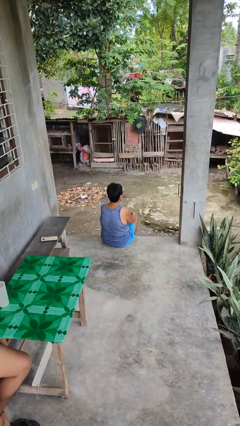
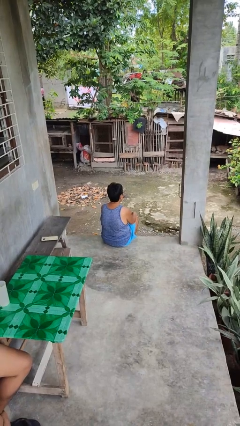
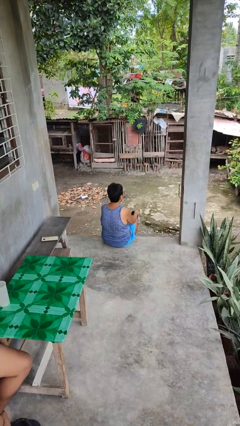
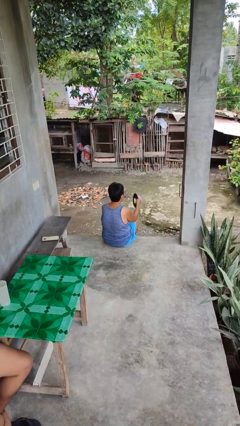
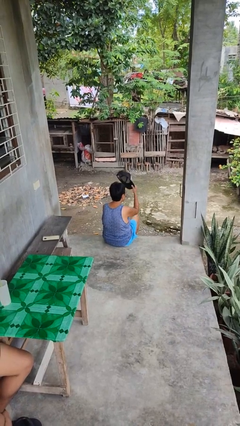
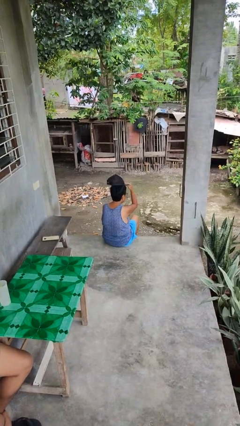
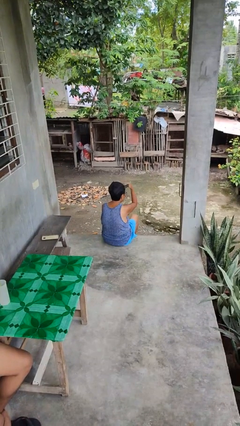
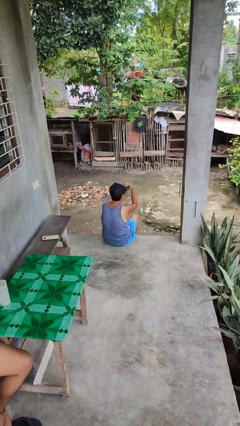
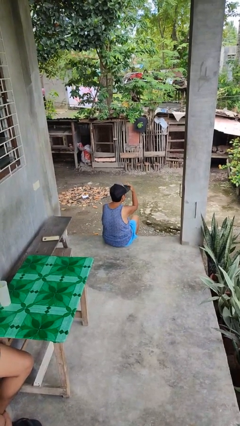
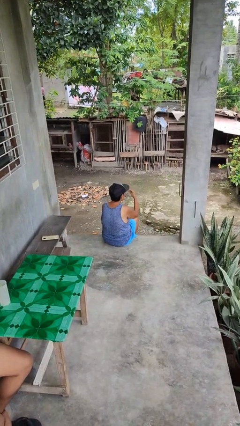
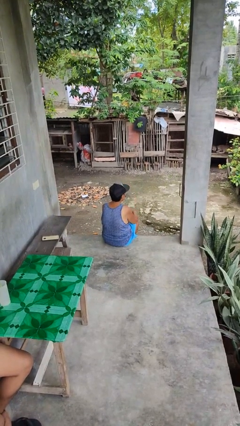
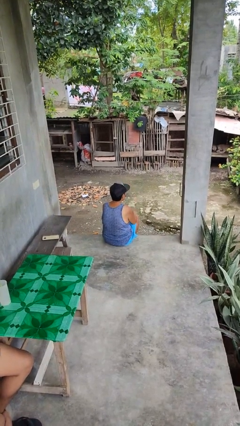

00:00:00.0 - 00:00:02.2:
person puts on hat

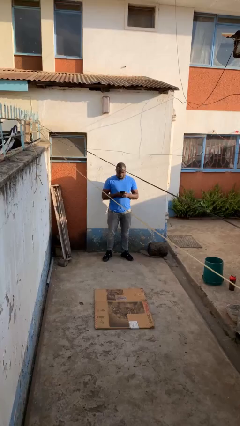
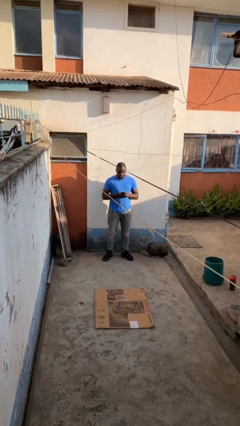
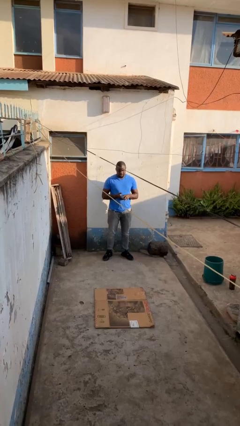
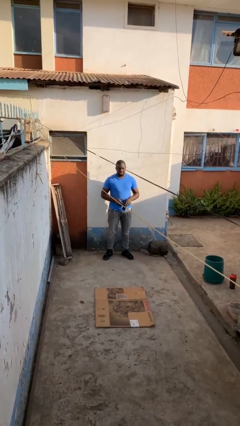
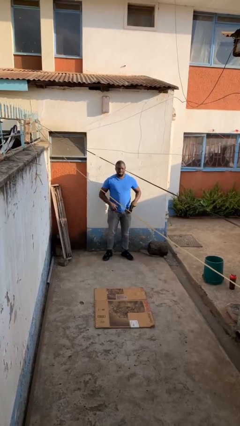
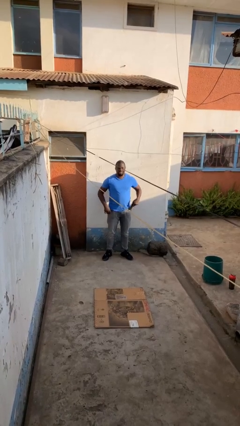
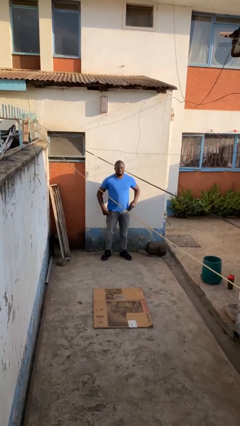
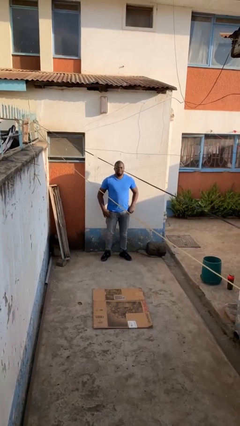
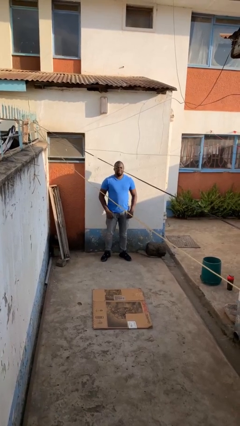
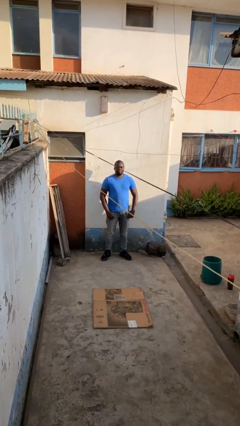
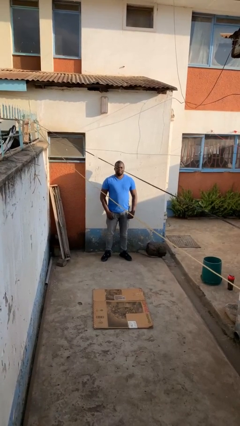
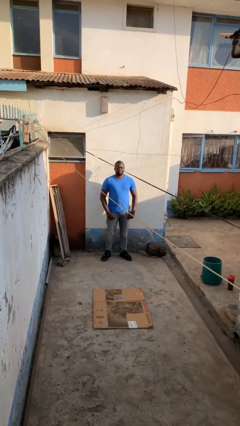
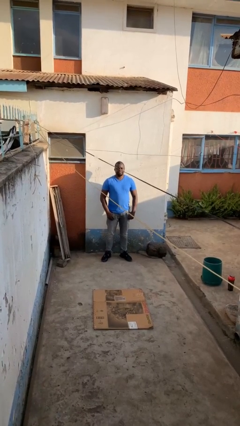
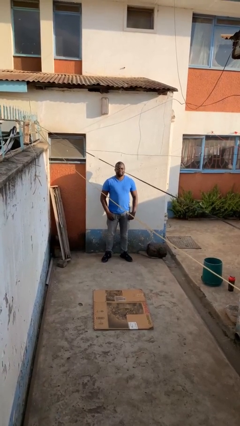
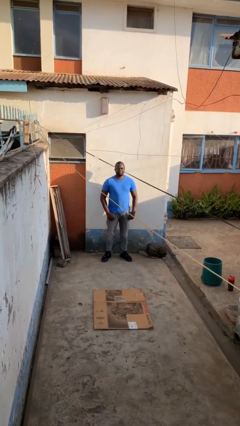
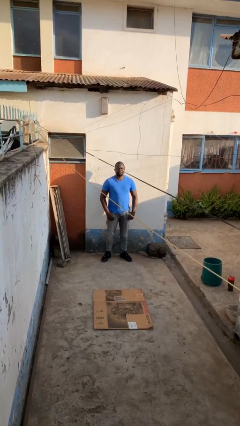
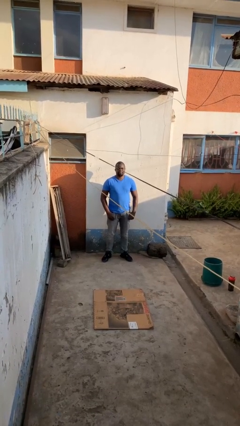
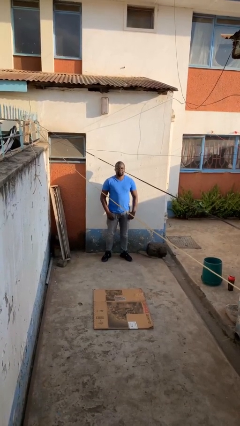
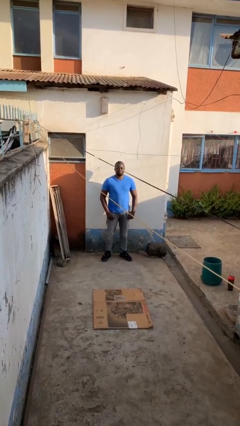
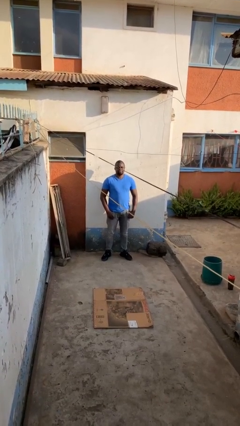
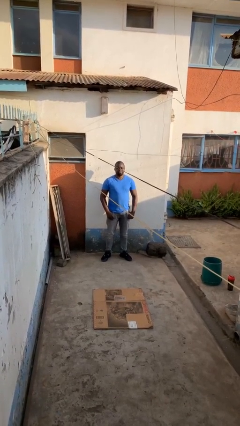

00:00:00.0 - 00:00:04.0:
person puts phone into pocket

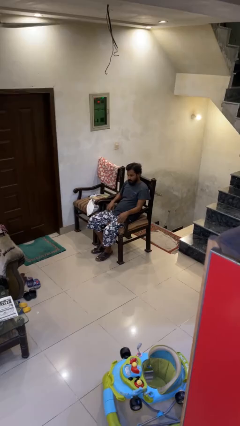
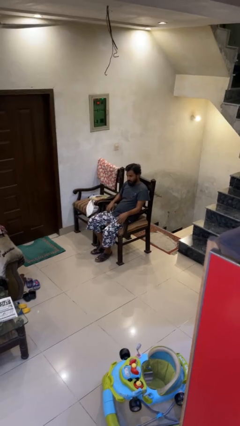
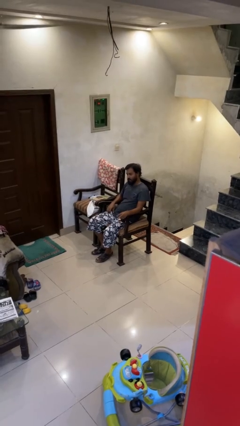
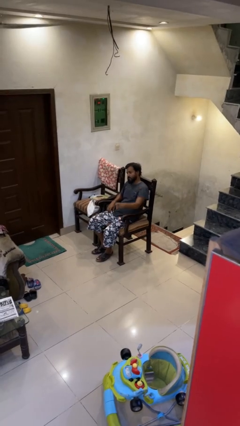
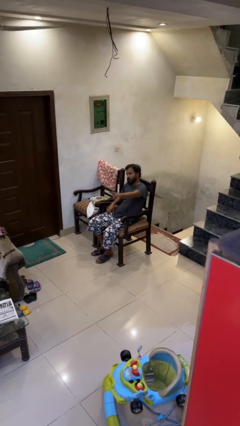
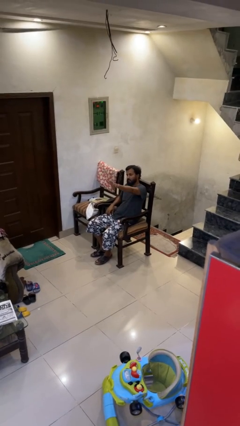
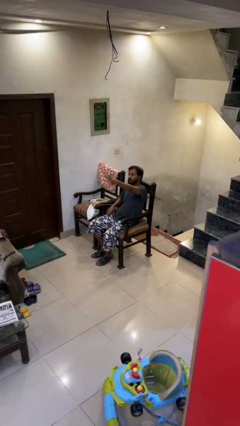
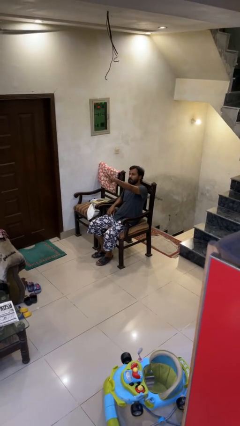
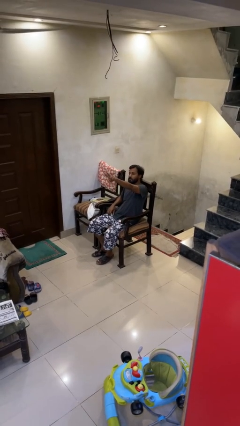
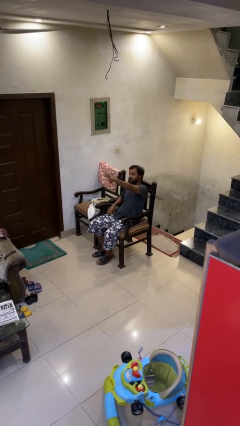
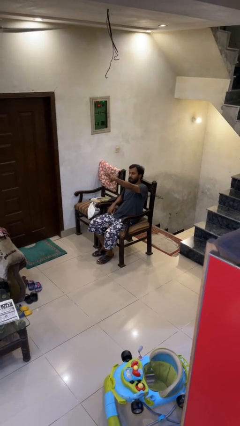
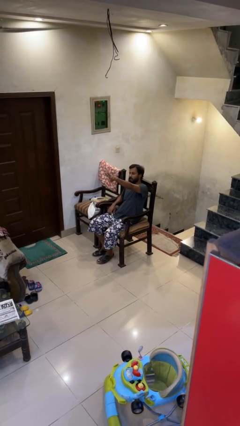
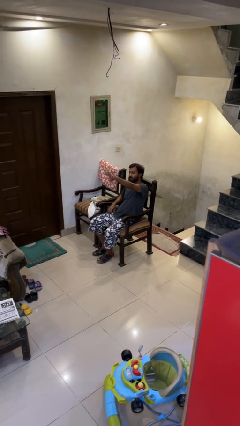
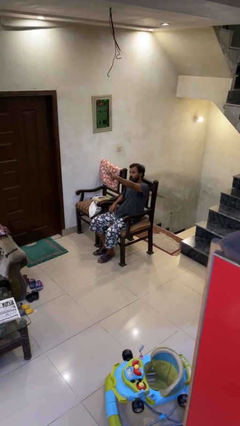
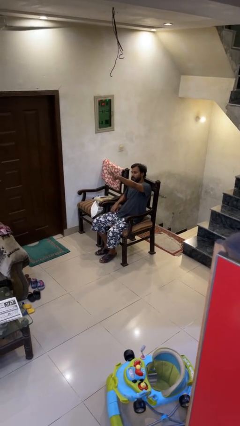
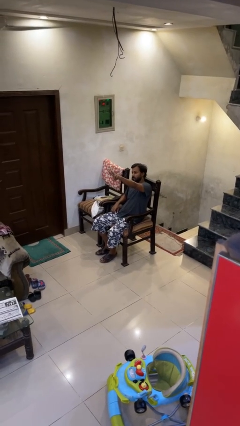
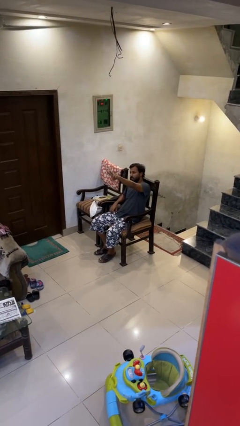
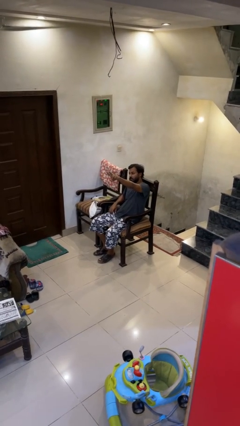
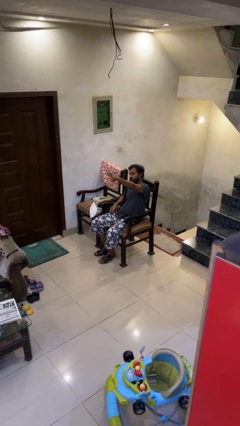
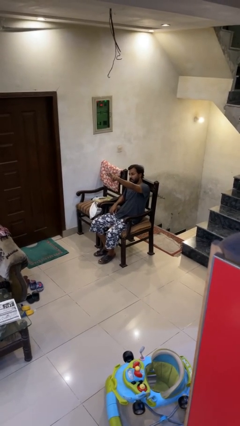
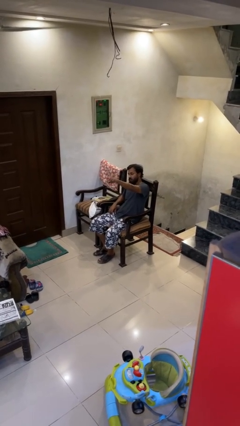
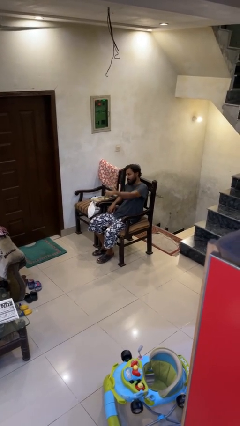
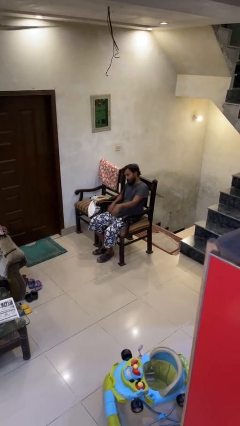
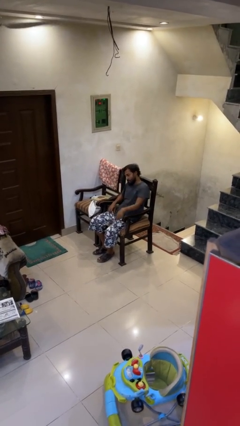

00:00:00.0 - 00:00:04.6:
person gestures peace

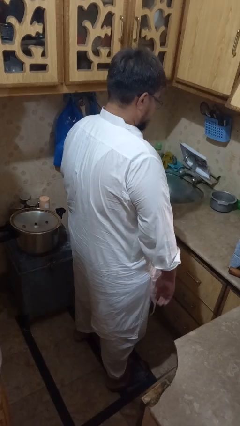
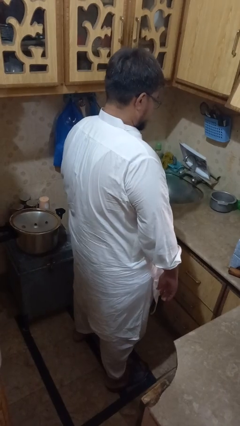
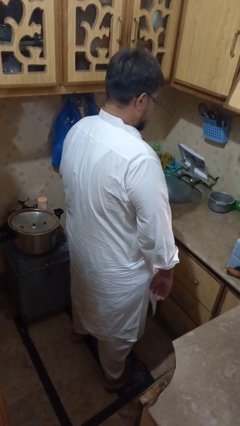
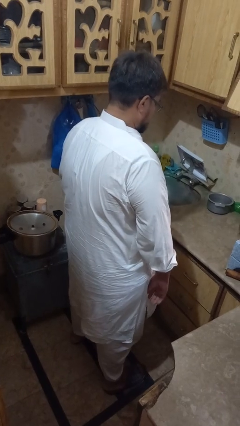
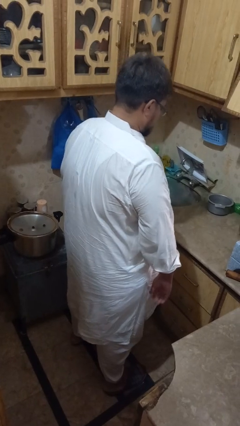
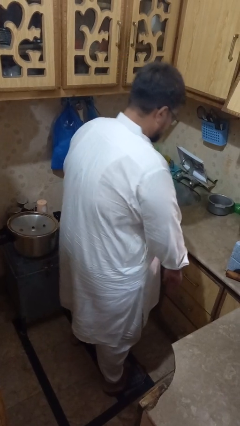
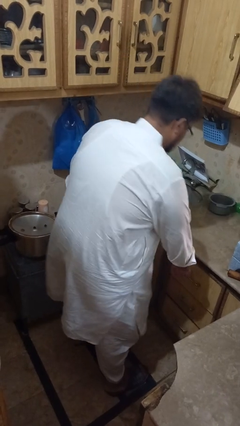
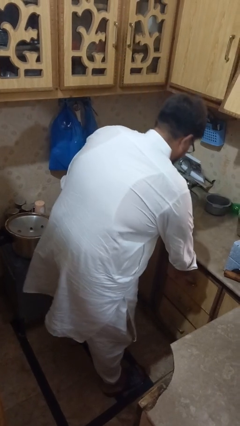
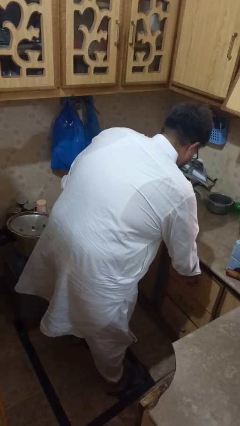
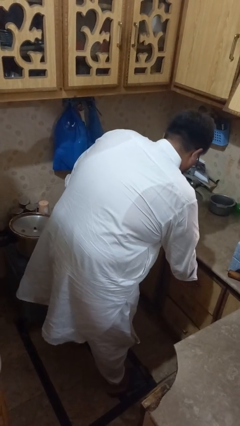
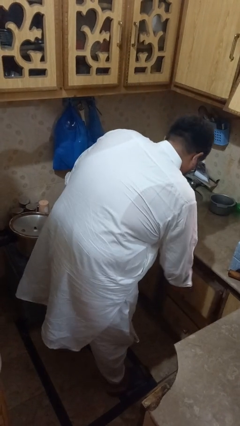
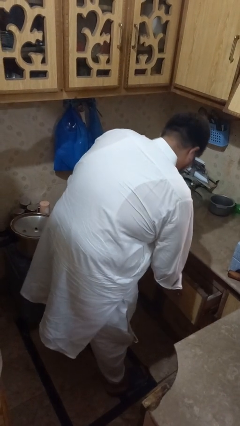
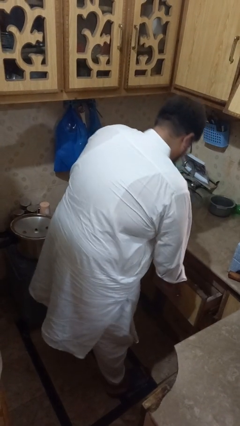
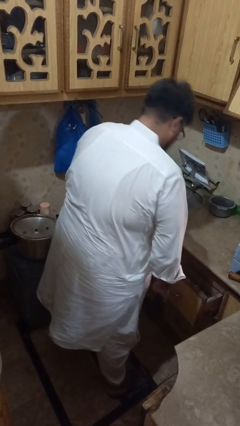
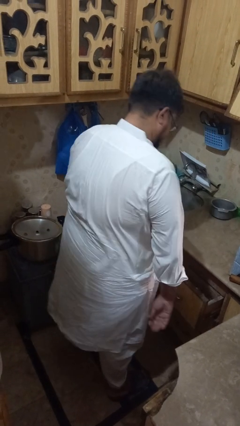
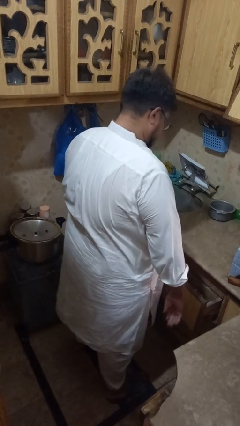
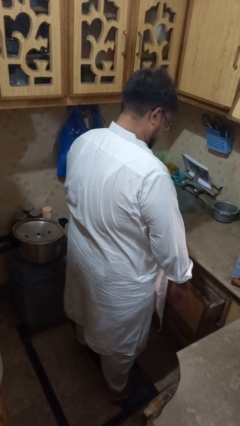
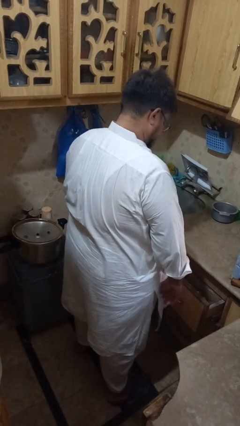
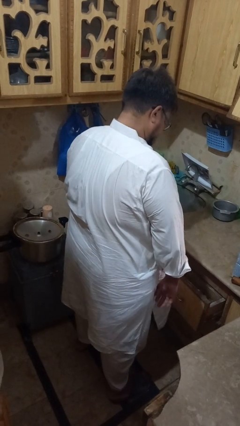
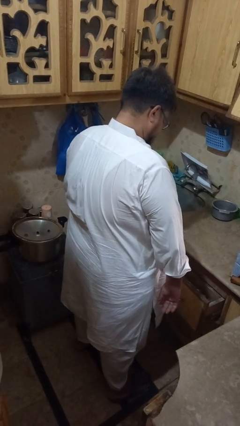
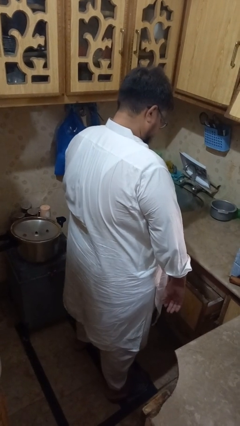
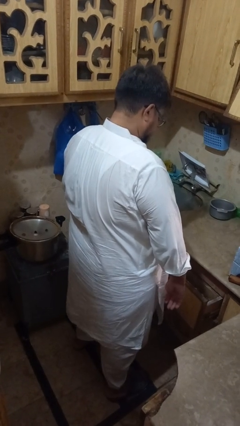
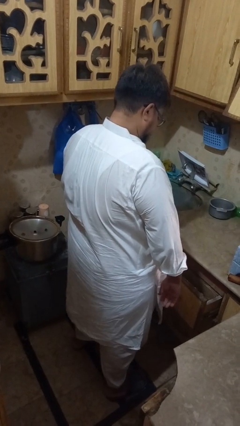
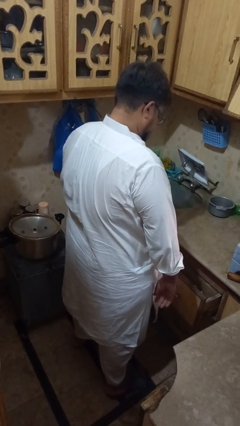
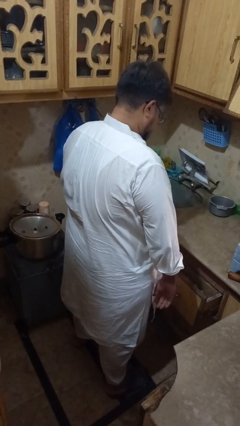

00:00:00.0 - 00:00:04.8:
person opens kitchen drawer

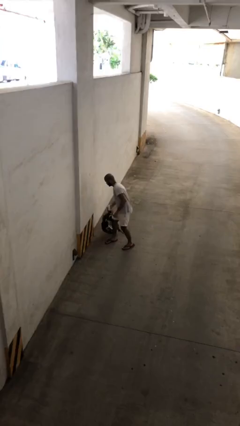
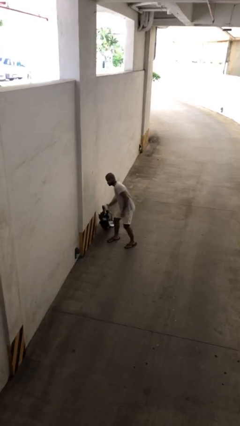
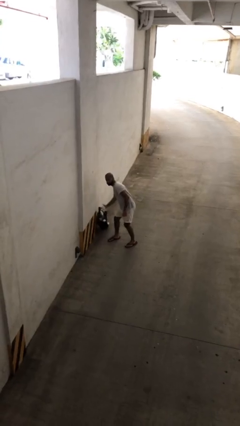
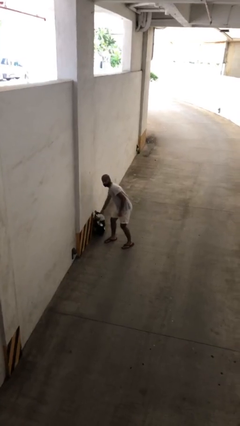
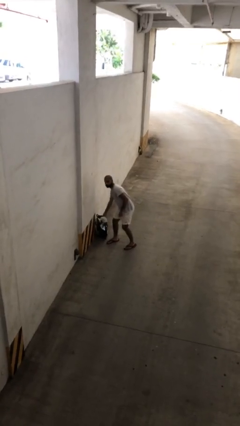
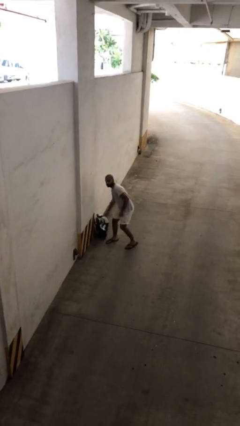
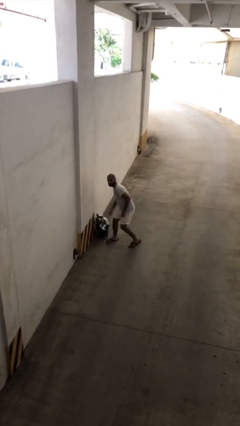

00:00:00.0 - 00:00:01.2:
person puts down object on floor

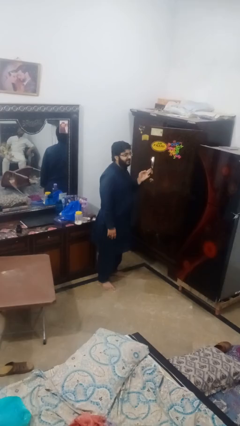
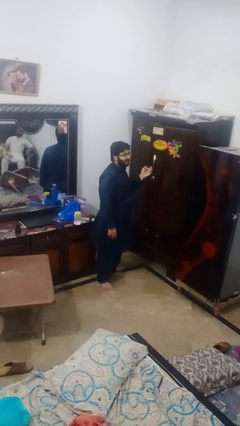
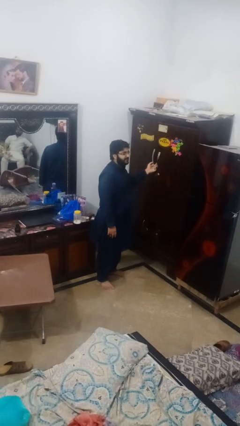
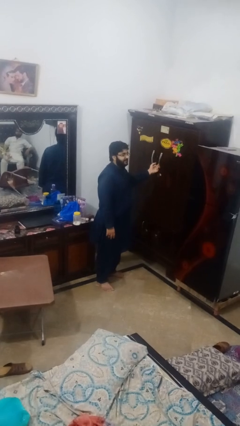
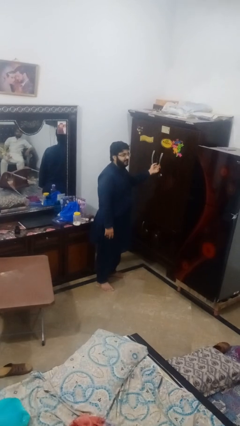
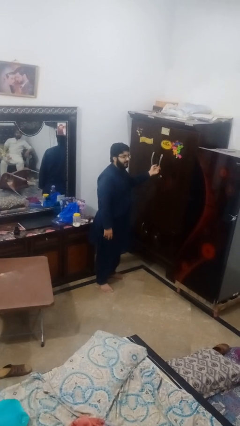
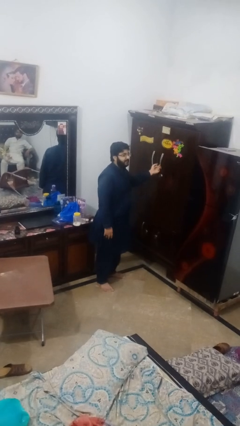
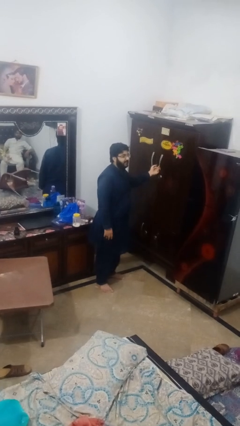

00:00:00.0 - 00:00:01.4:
person closes closet door
